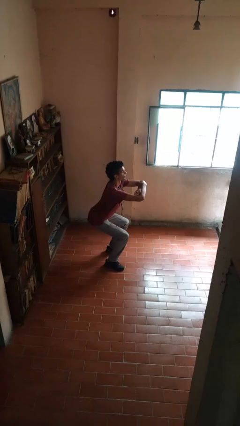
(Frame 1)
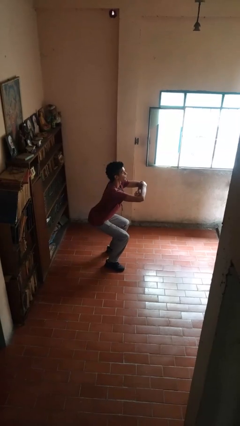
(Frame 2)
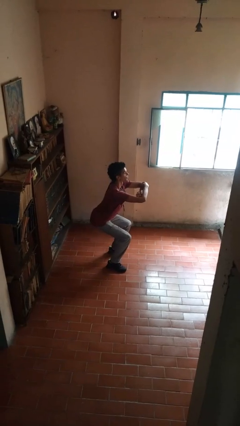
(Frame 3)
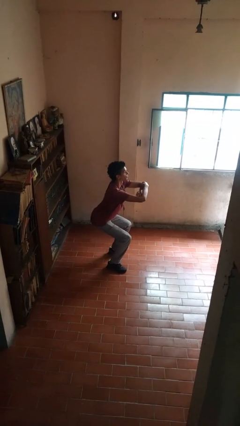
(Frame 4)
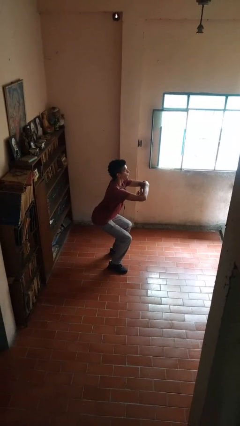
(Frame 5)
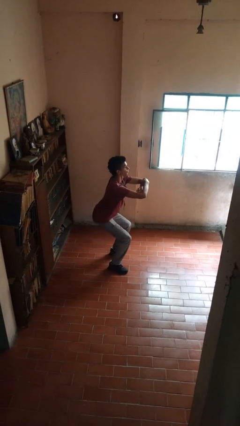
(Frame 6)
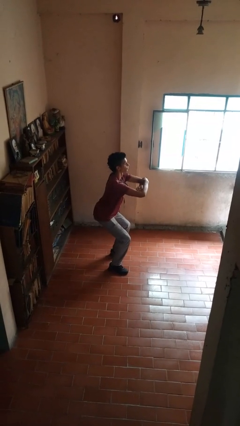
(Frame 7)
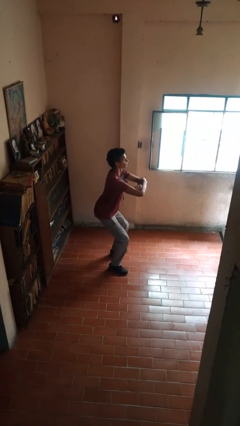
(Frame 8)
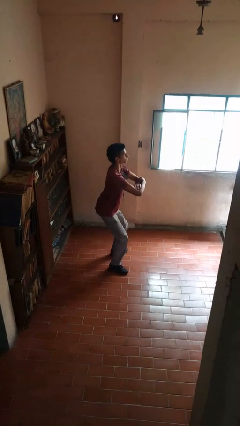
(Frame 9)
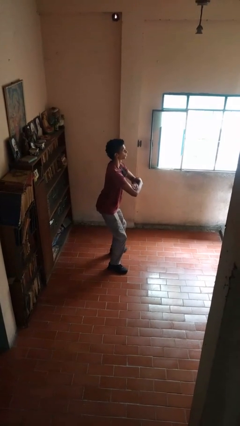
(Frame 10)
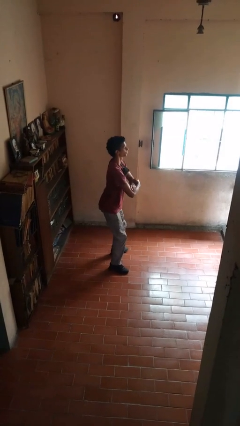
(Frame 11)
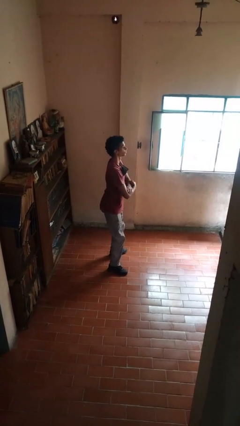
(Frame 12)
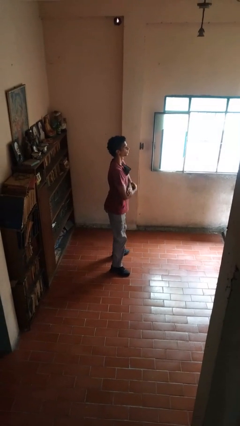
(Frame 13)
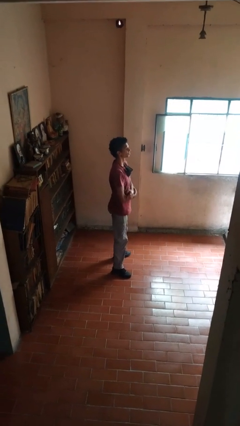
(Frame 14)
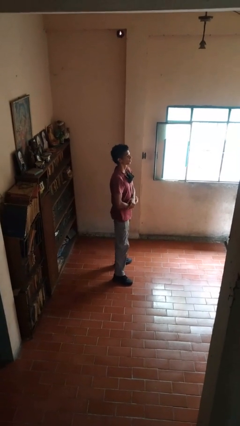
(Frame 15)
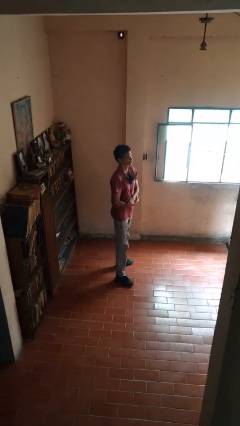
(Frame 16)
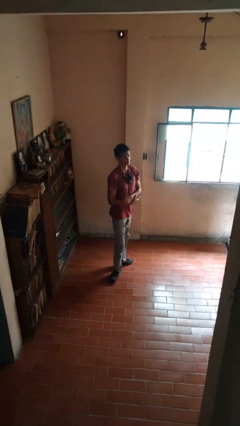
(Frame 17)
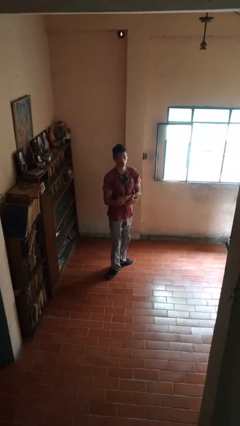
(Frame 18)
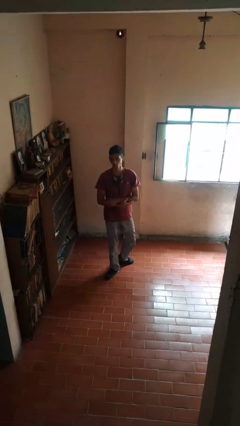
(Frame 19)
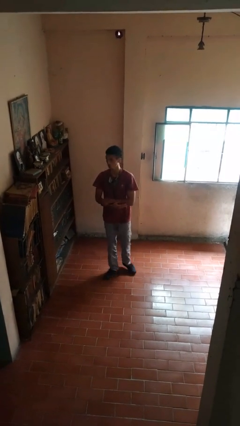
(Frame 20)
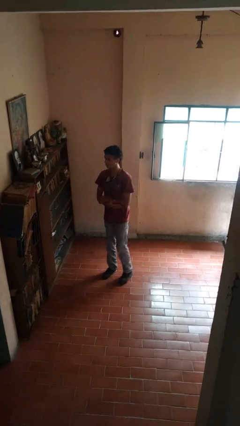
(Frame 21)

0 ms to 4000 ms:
person stands up

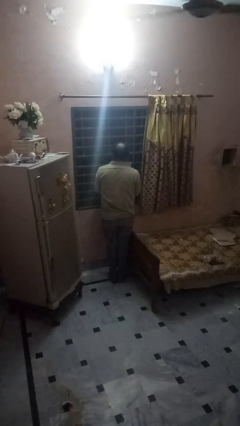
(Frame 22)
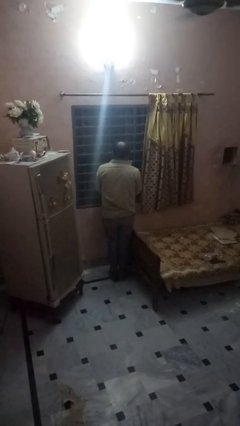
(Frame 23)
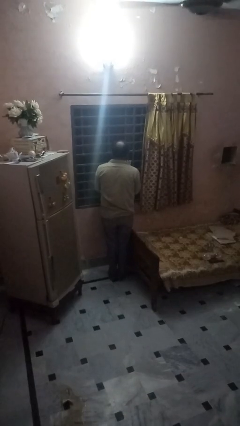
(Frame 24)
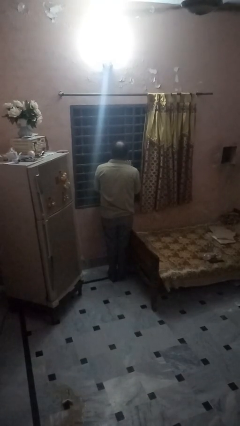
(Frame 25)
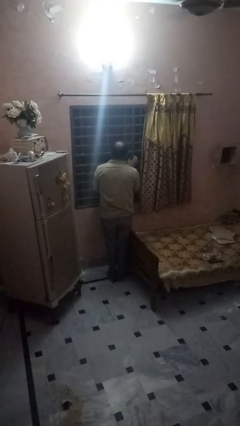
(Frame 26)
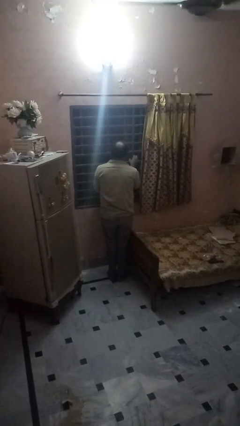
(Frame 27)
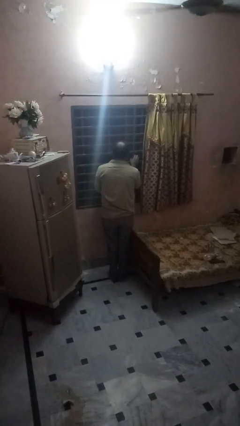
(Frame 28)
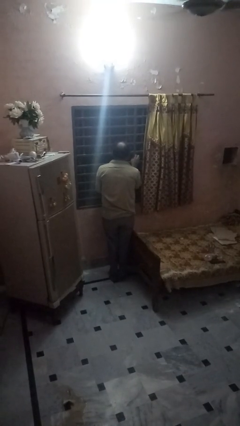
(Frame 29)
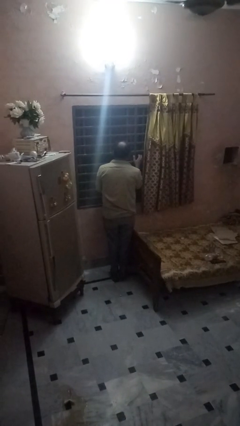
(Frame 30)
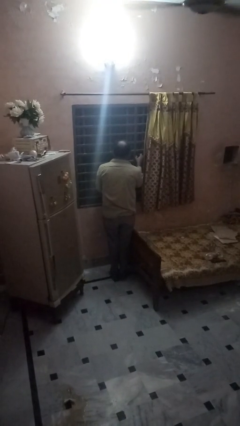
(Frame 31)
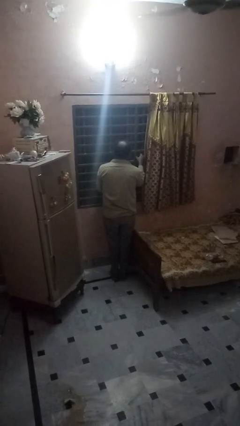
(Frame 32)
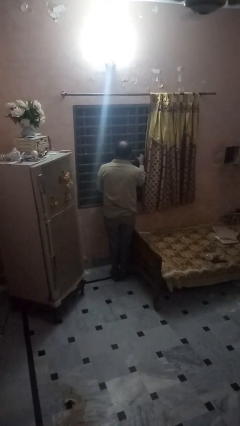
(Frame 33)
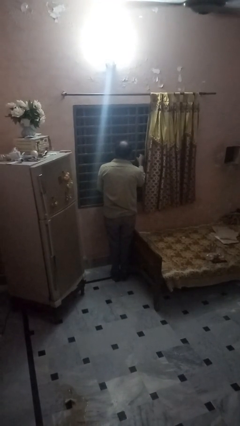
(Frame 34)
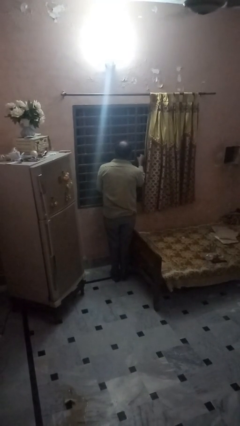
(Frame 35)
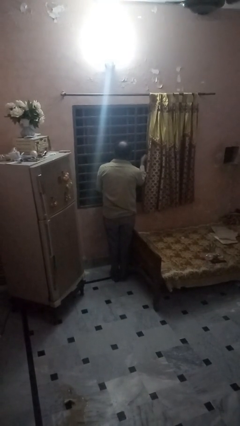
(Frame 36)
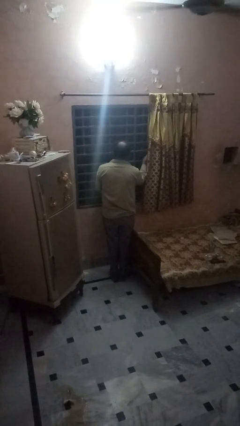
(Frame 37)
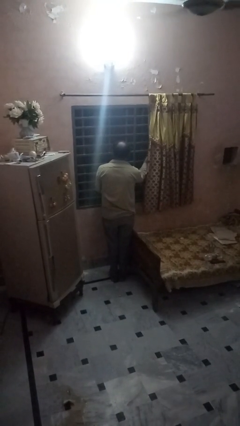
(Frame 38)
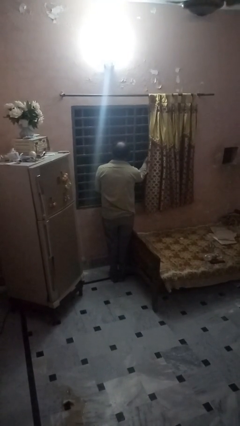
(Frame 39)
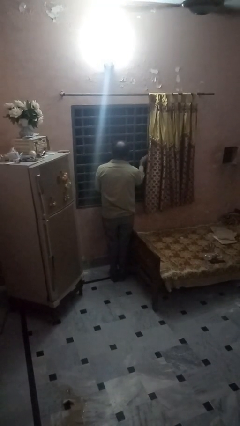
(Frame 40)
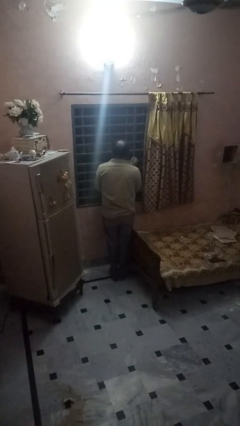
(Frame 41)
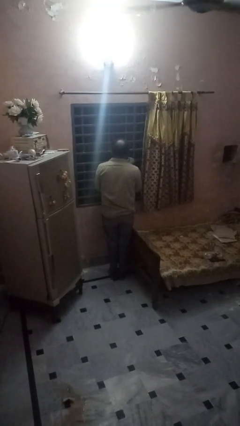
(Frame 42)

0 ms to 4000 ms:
person opens home window

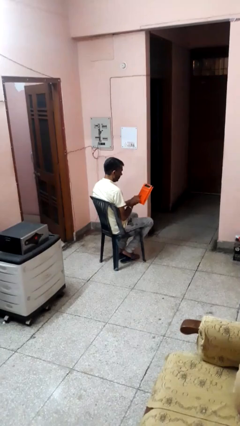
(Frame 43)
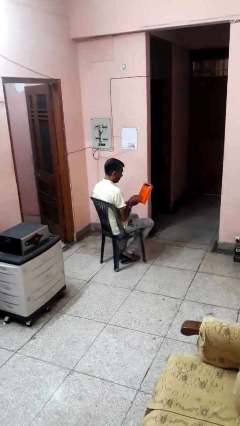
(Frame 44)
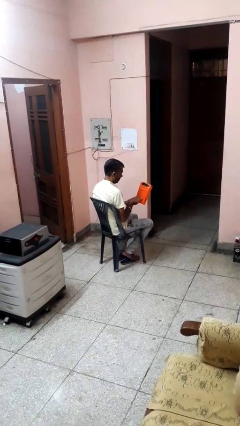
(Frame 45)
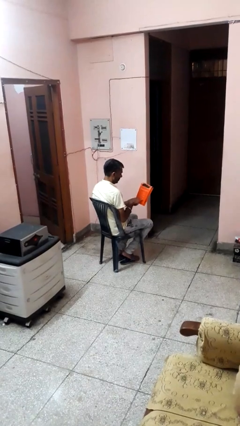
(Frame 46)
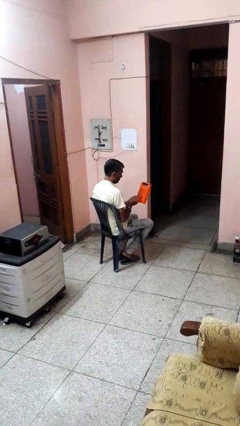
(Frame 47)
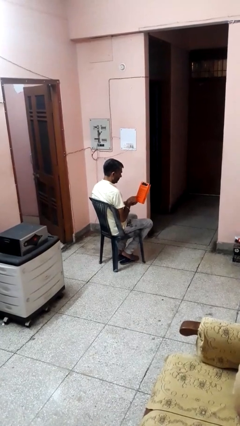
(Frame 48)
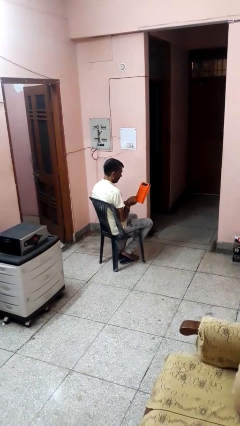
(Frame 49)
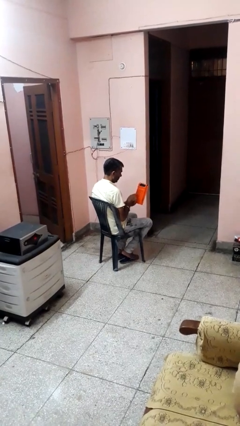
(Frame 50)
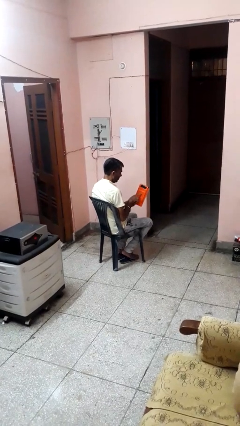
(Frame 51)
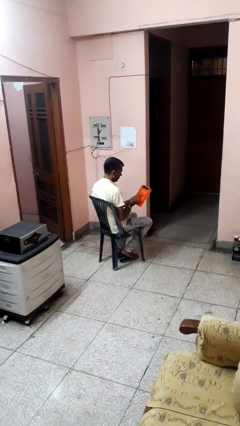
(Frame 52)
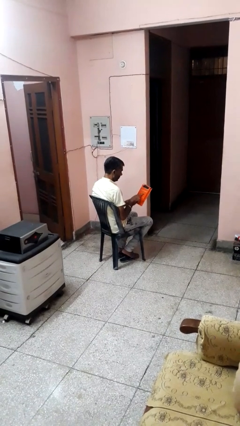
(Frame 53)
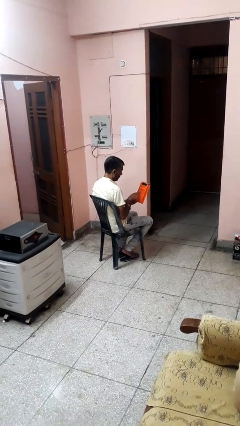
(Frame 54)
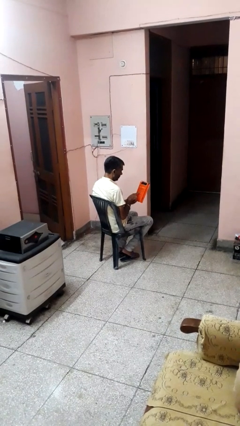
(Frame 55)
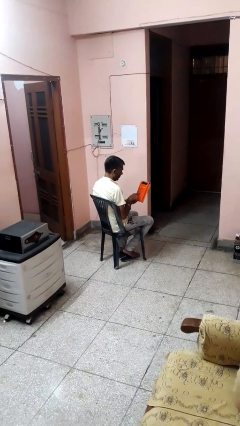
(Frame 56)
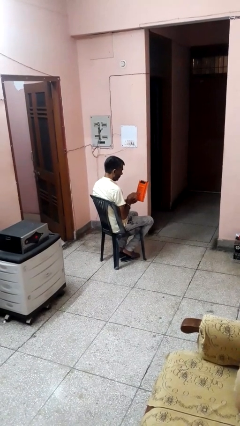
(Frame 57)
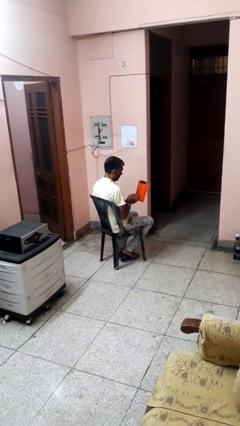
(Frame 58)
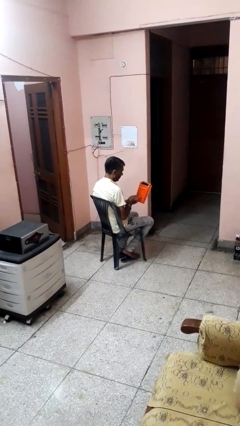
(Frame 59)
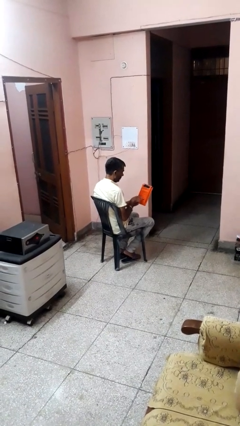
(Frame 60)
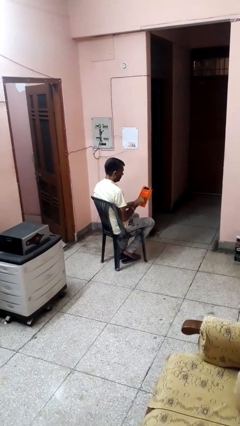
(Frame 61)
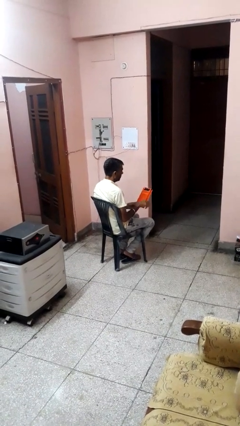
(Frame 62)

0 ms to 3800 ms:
person taps object with finger

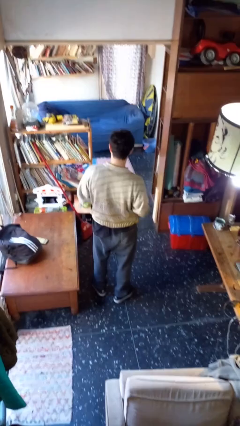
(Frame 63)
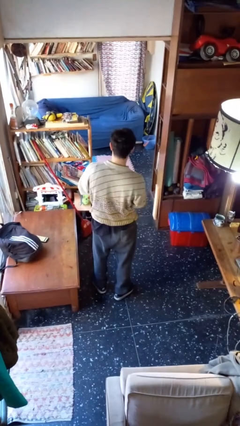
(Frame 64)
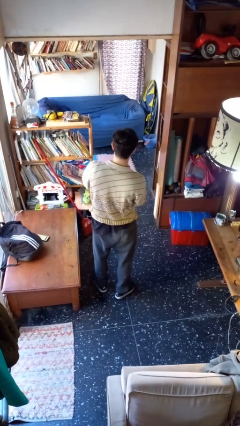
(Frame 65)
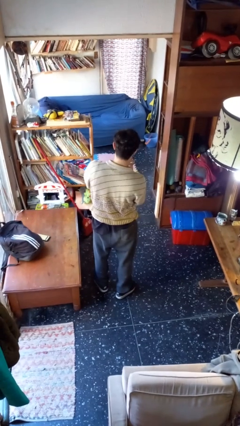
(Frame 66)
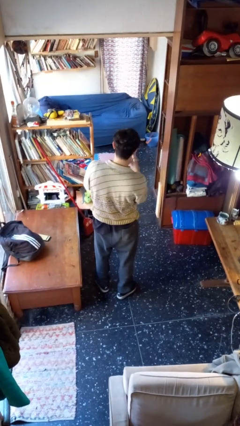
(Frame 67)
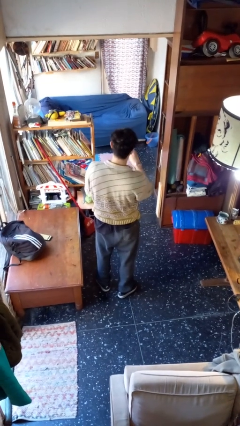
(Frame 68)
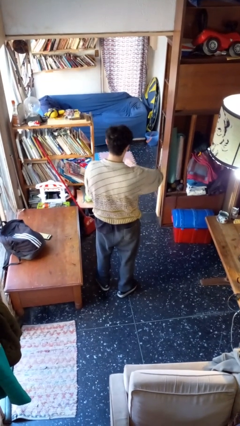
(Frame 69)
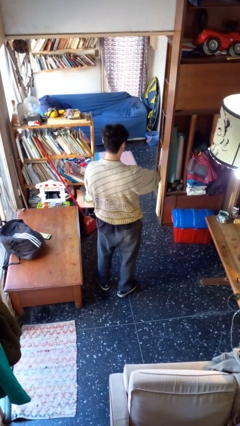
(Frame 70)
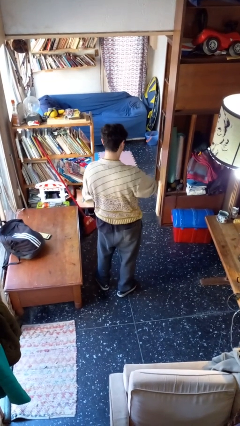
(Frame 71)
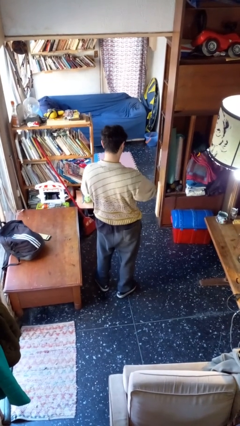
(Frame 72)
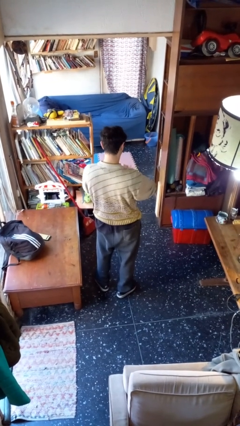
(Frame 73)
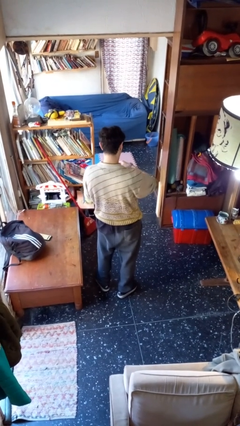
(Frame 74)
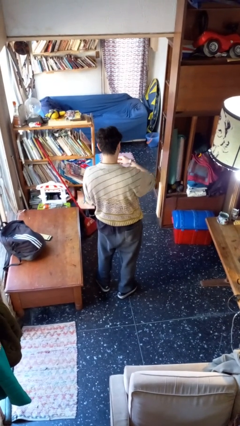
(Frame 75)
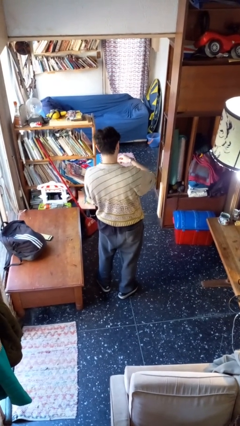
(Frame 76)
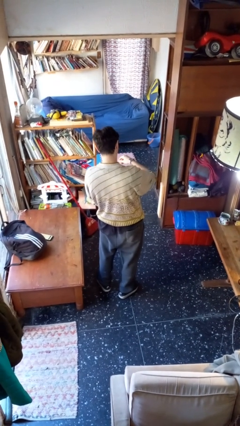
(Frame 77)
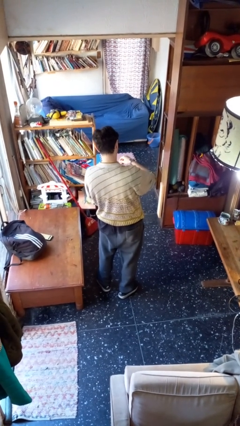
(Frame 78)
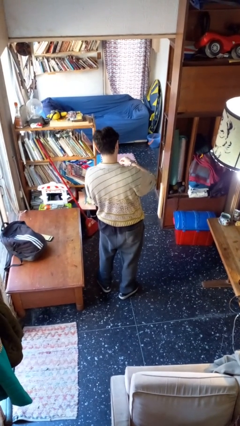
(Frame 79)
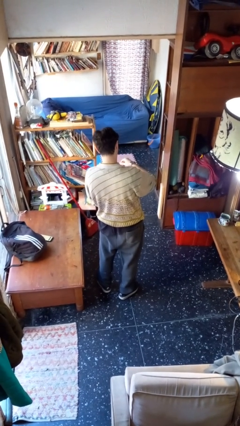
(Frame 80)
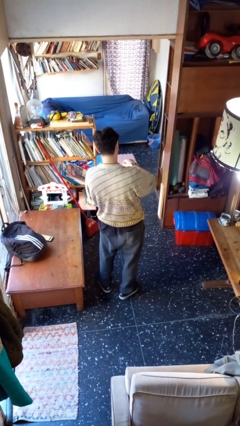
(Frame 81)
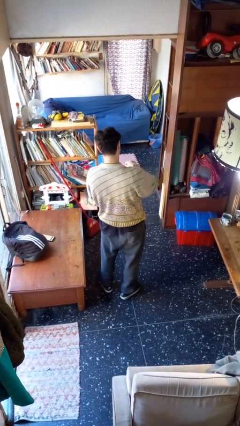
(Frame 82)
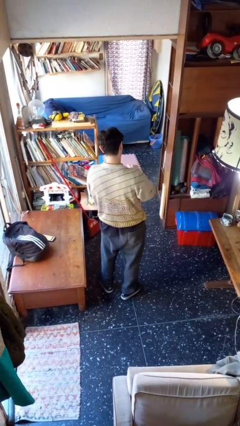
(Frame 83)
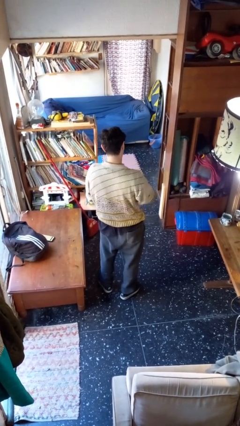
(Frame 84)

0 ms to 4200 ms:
person puts on wristwatch

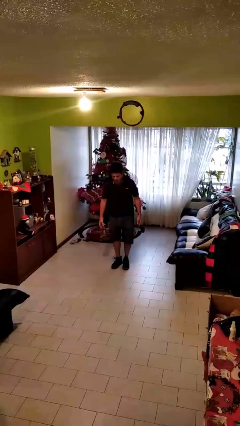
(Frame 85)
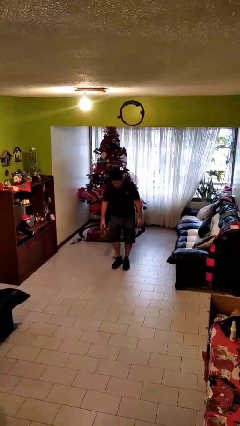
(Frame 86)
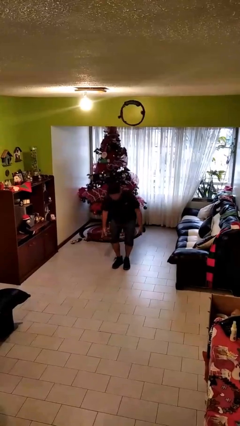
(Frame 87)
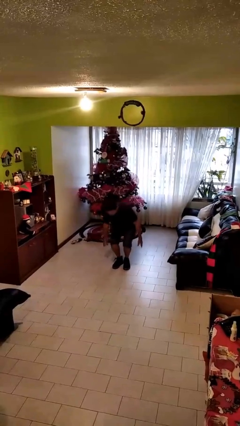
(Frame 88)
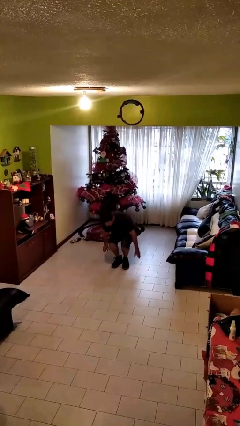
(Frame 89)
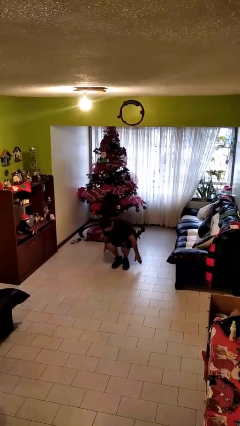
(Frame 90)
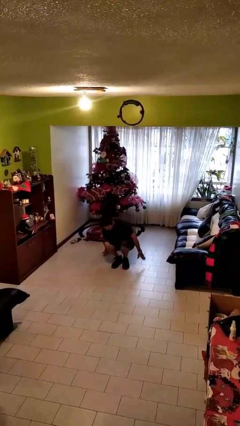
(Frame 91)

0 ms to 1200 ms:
person sits down

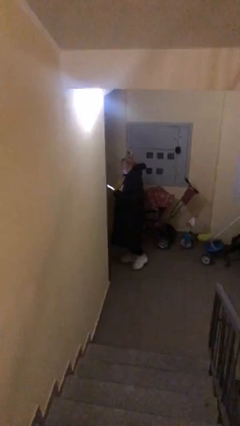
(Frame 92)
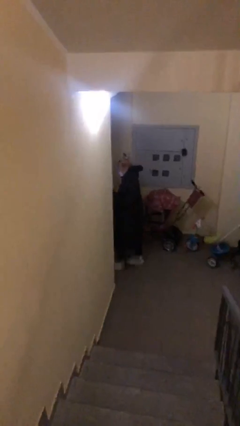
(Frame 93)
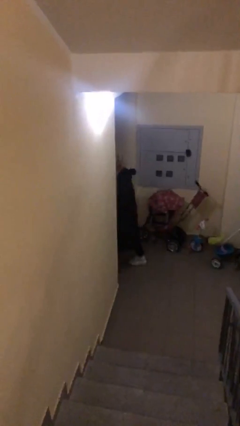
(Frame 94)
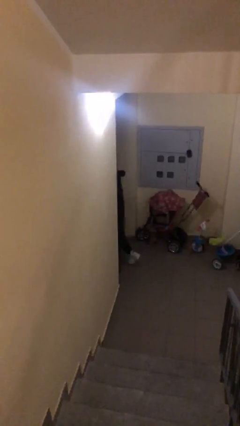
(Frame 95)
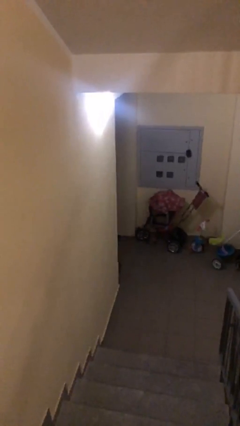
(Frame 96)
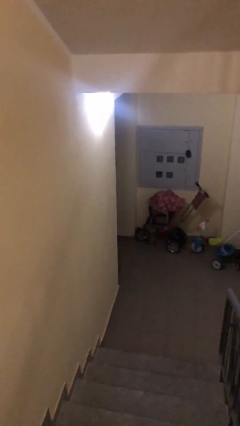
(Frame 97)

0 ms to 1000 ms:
person exits scene through structure
